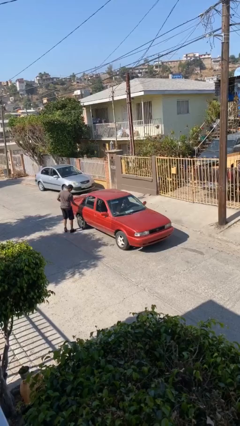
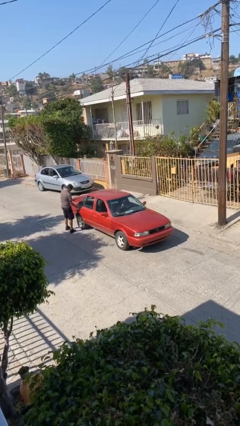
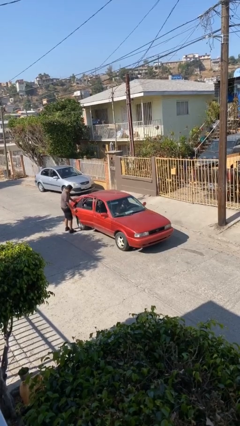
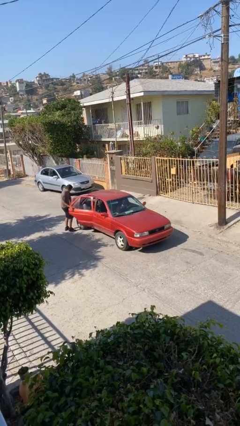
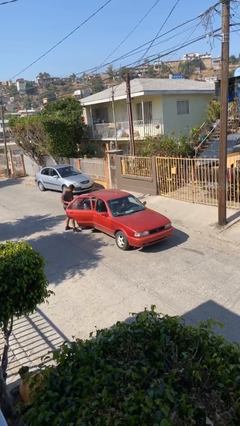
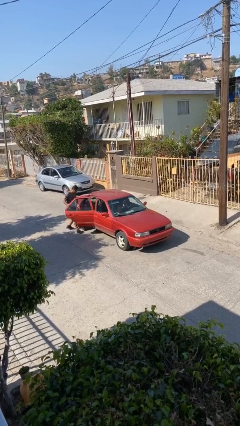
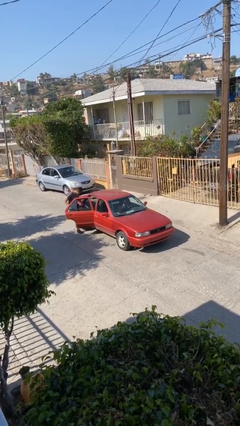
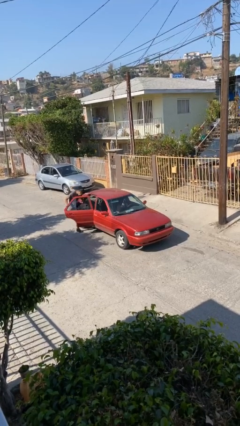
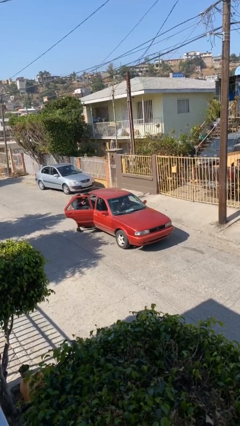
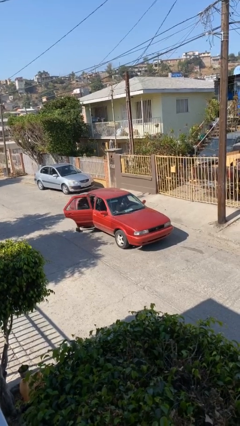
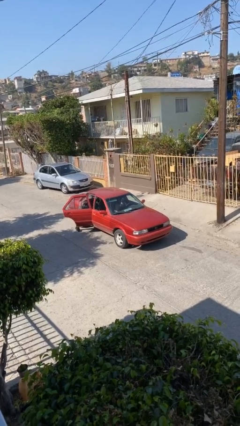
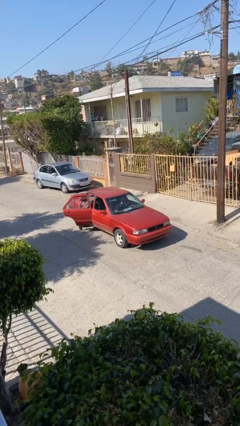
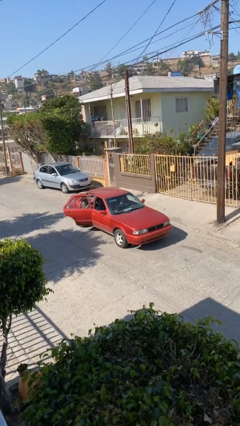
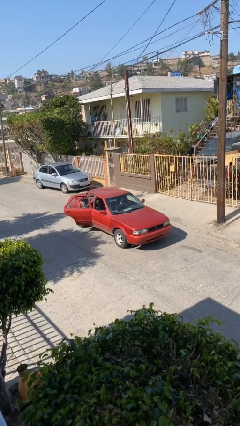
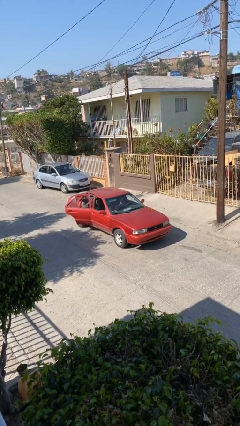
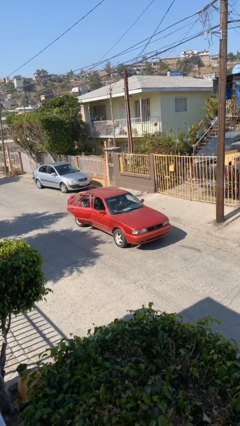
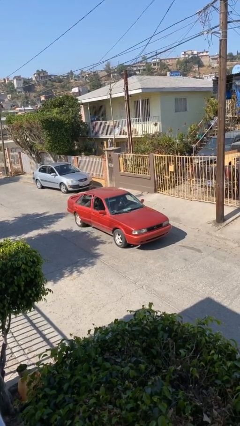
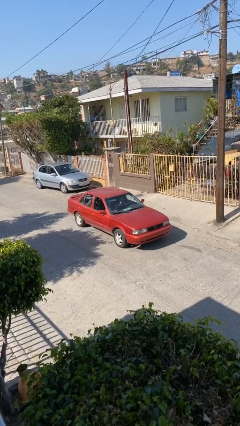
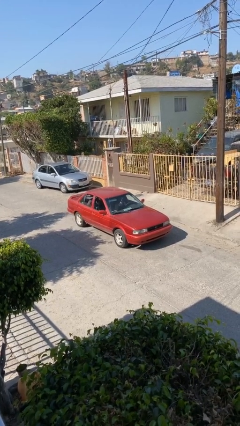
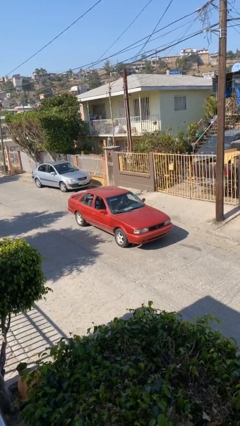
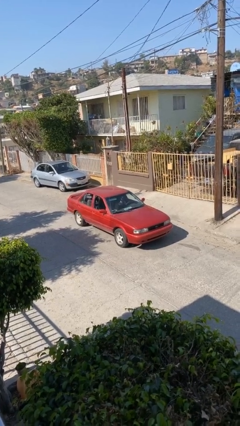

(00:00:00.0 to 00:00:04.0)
car picks up person

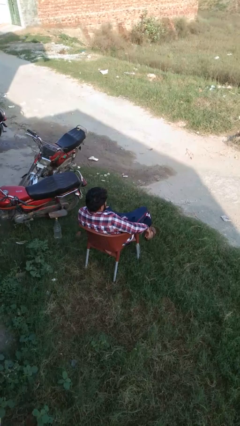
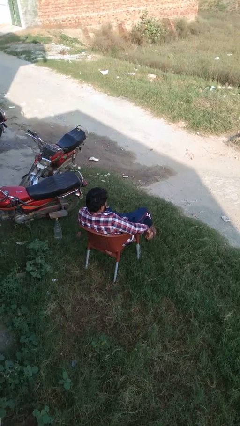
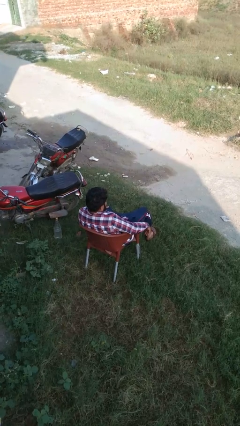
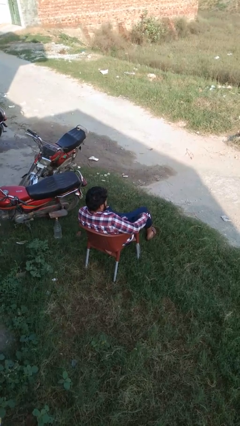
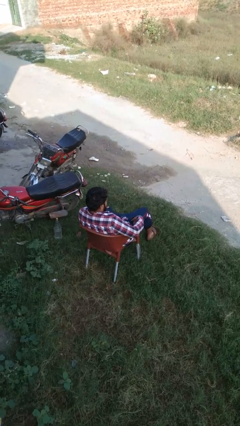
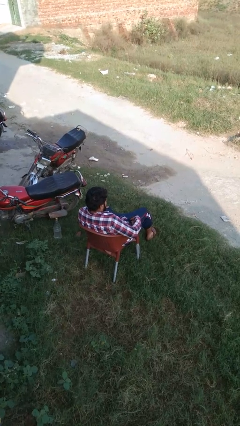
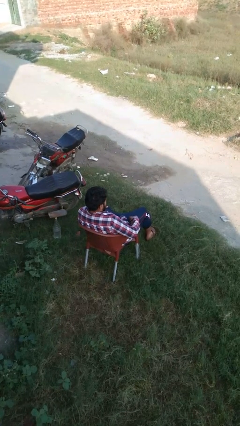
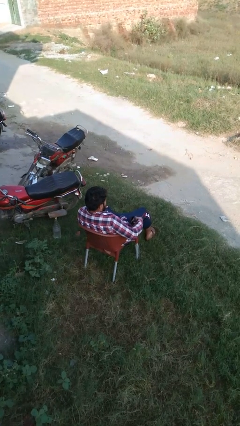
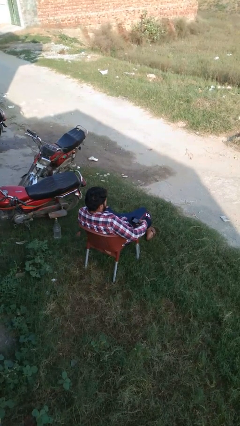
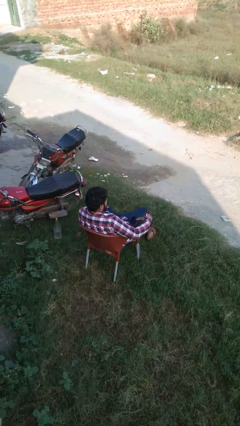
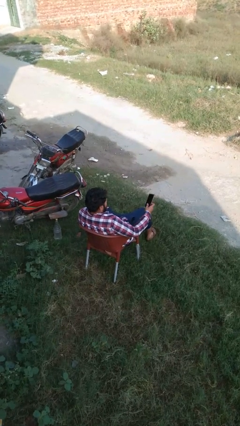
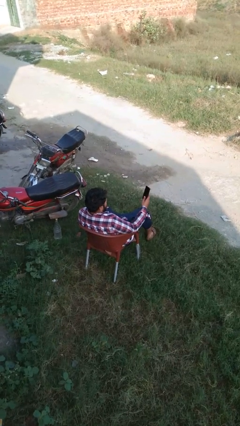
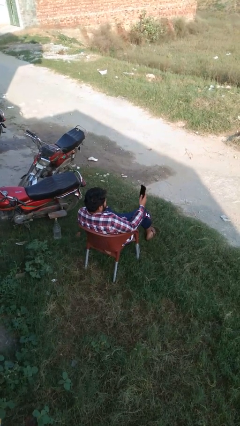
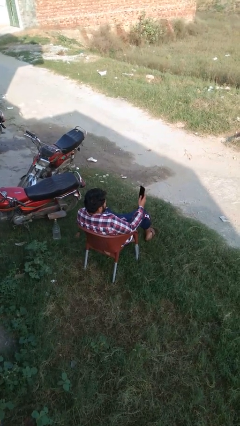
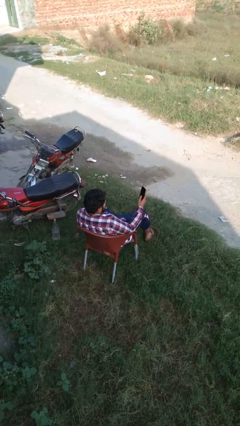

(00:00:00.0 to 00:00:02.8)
person takes phone from pocket

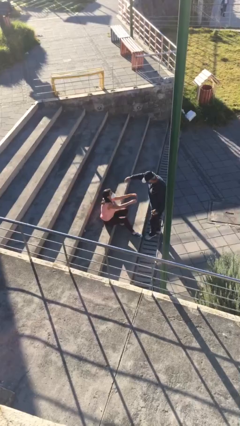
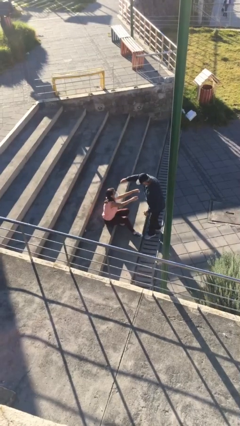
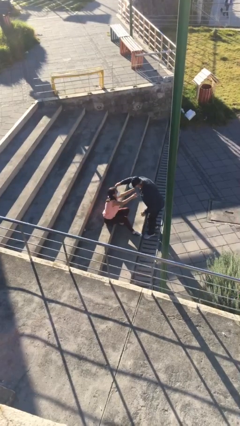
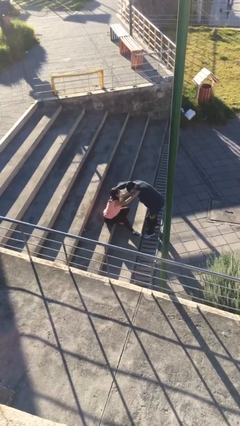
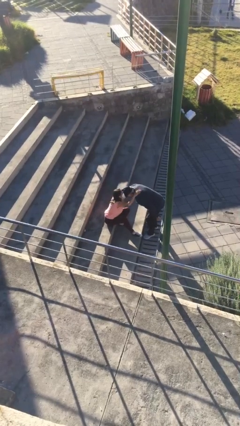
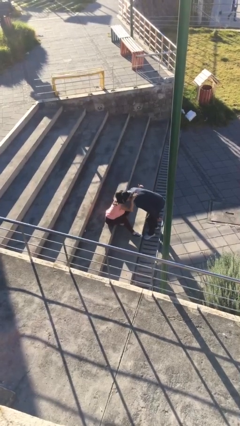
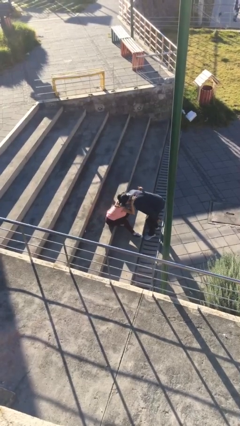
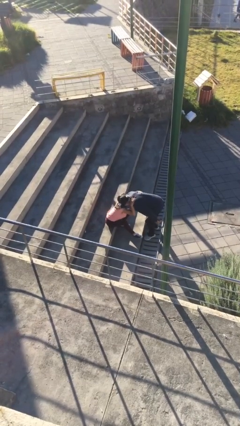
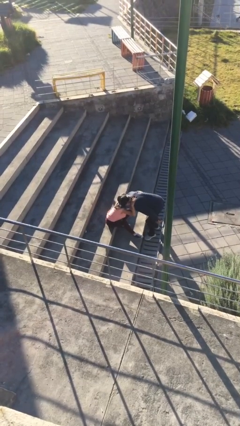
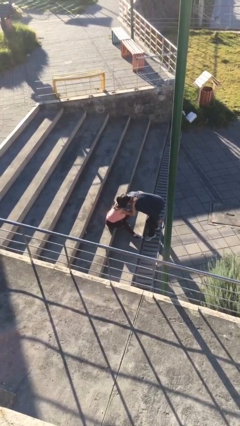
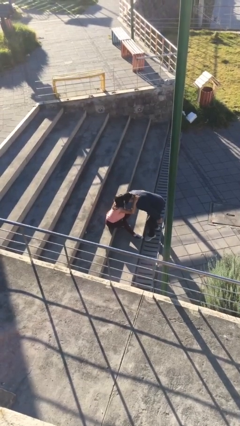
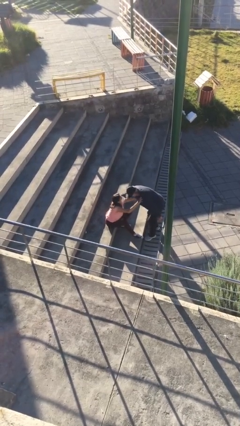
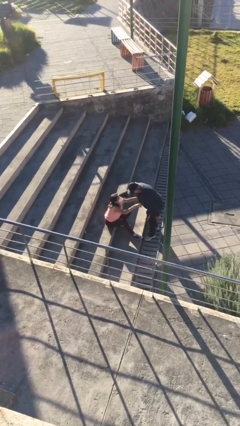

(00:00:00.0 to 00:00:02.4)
person embraces person

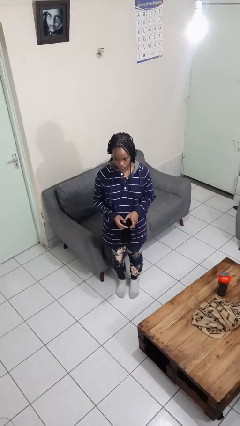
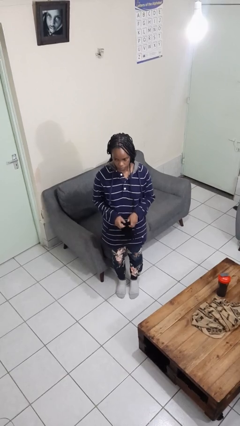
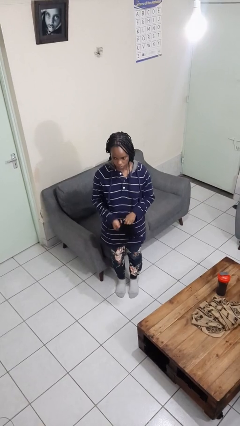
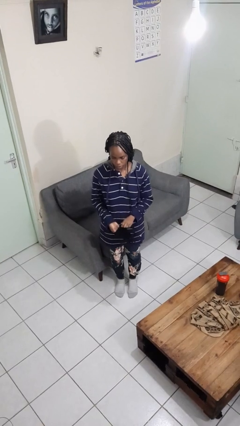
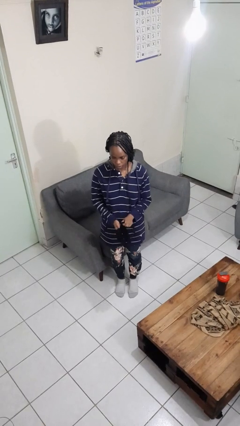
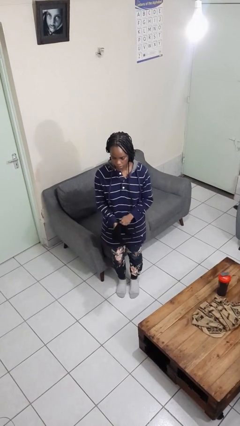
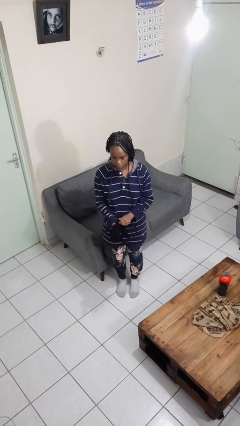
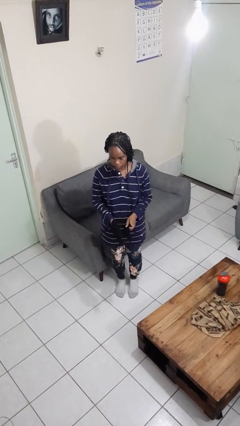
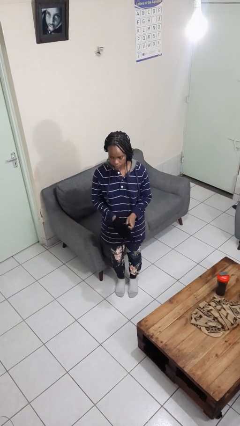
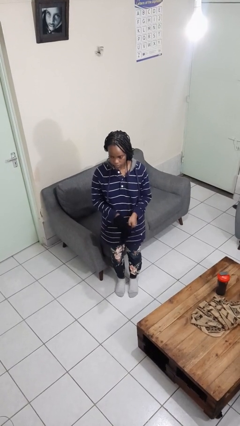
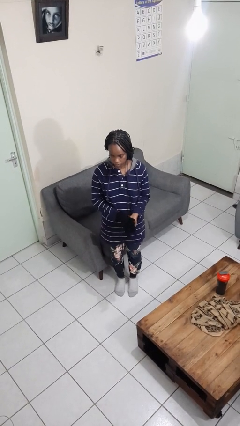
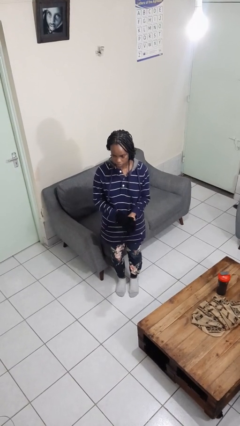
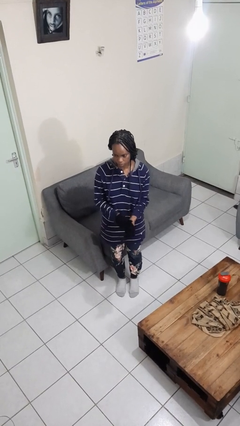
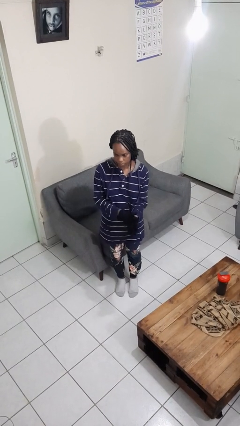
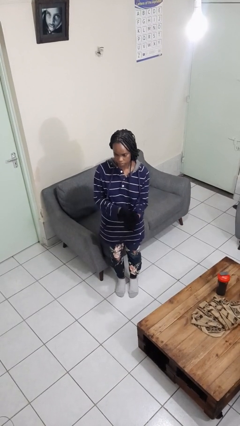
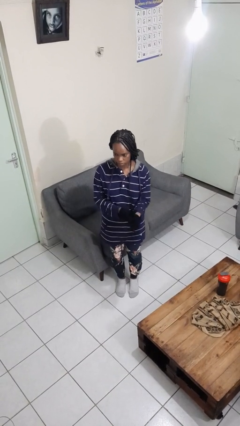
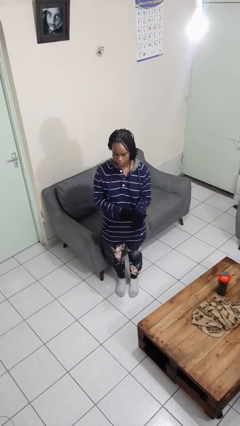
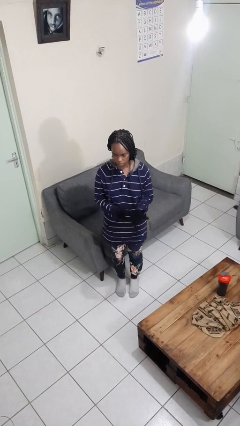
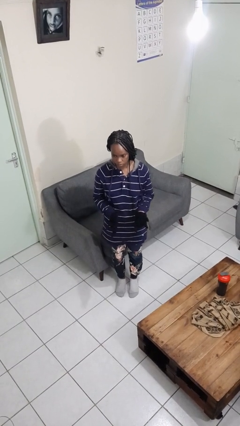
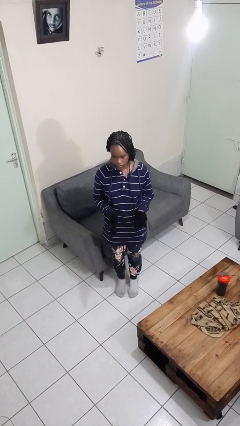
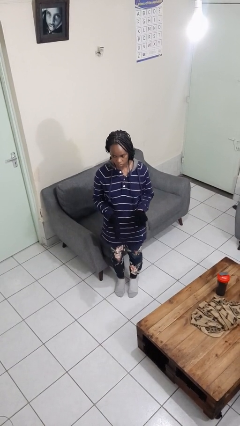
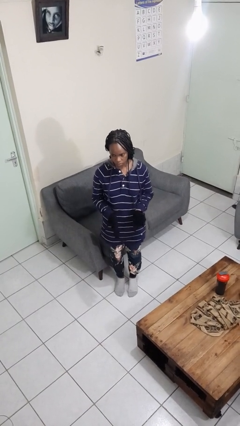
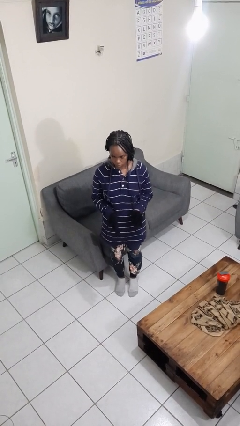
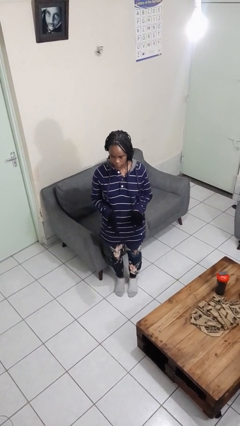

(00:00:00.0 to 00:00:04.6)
person puts on gloves

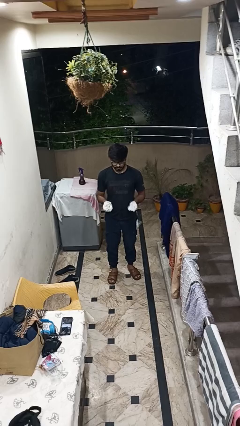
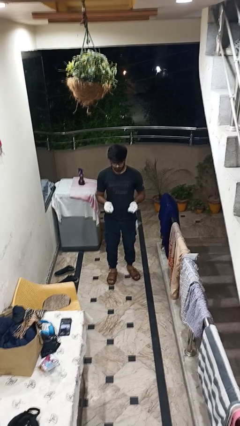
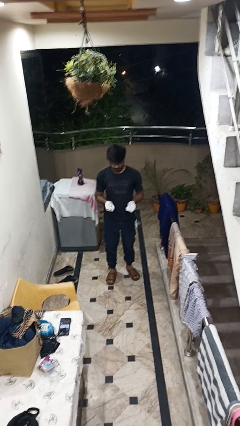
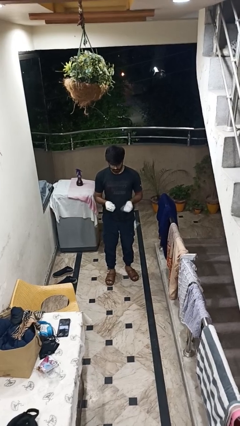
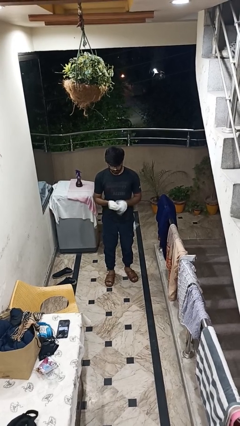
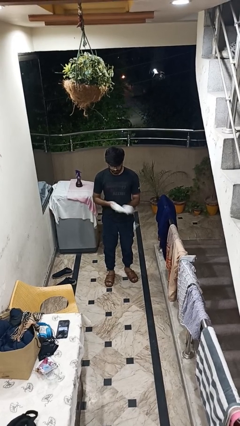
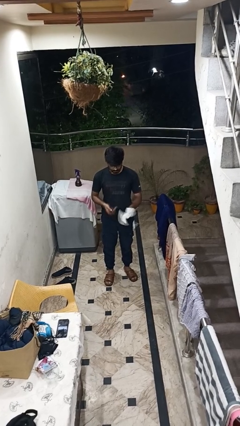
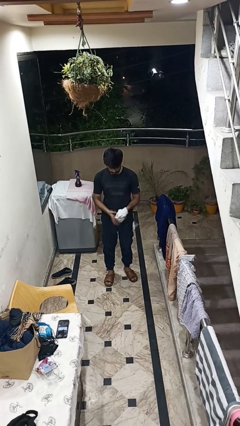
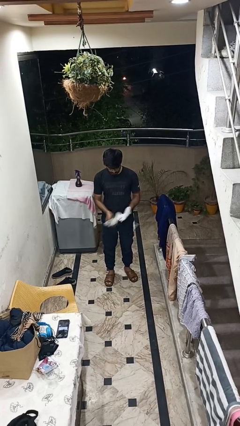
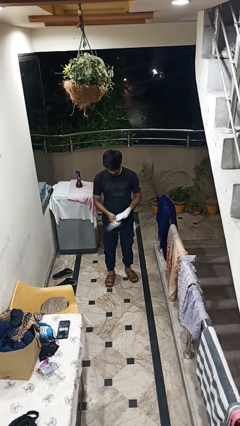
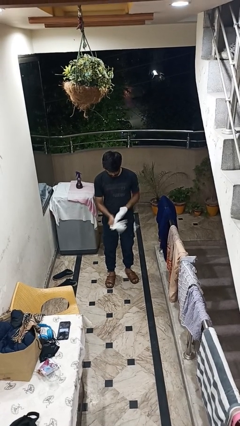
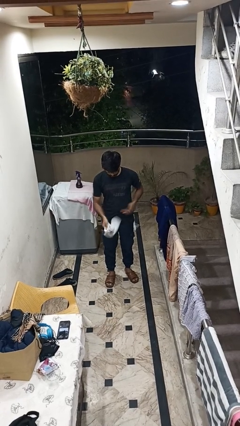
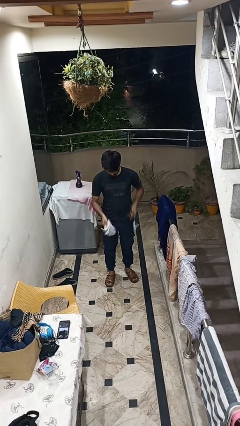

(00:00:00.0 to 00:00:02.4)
person takes off gloves

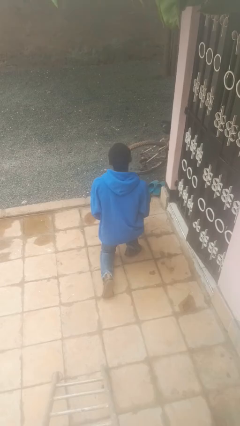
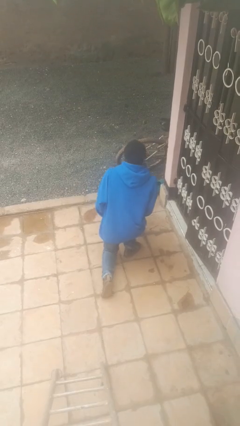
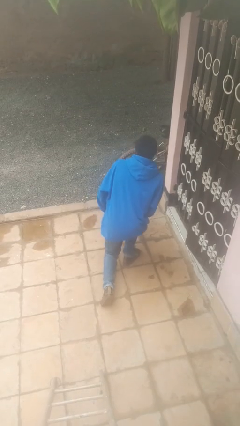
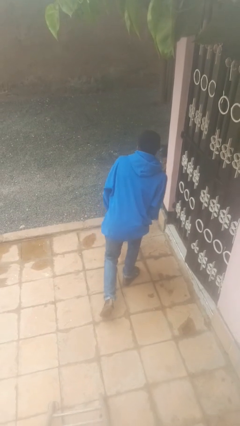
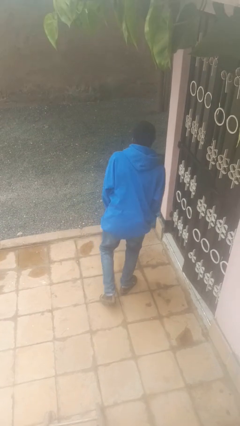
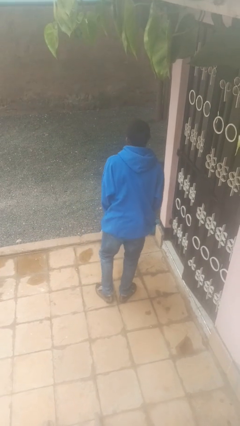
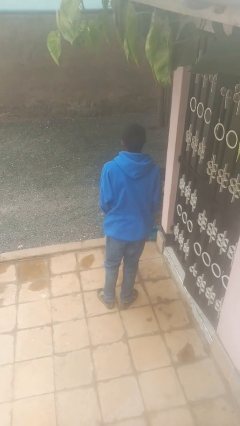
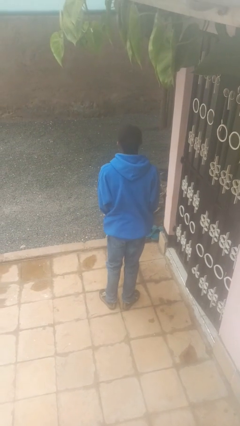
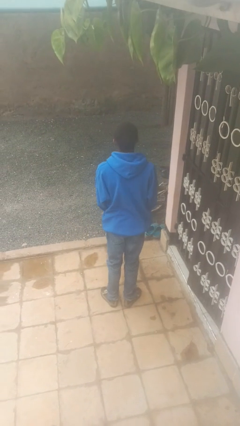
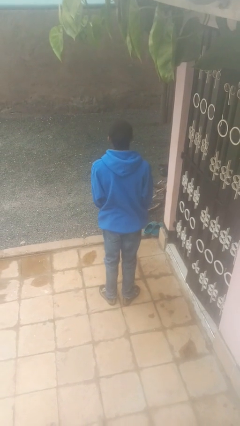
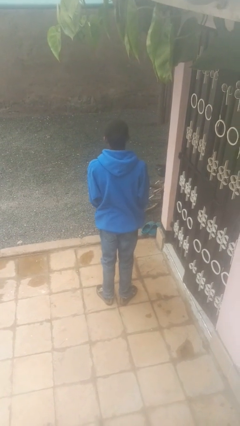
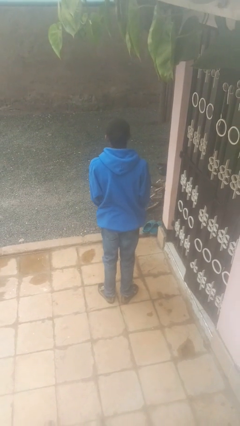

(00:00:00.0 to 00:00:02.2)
person stands up from floor
